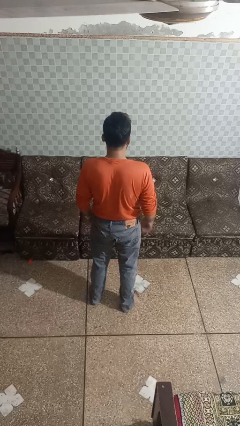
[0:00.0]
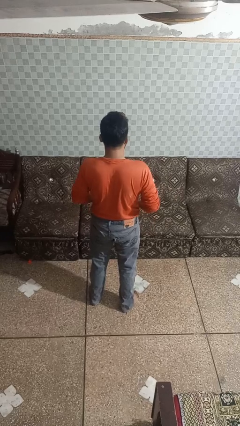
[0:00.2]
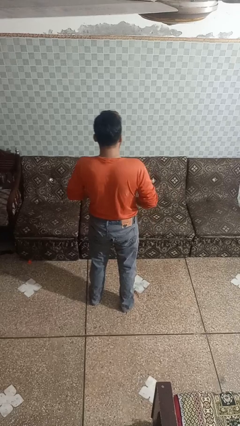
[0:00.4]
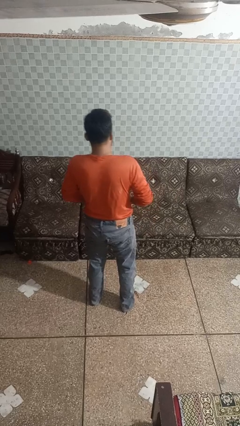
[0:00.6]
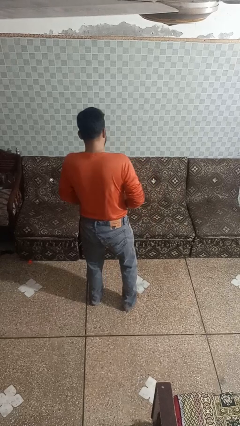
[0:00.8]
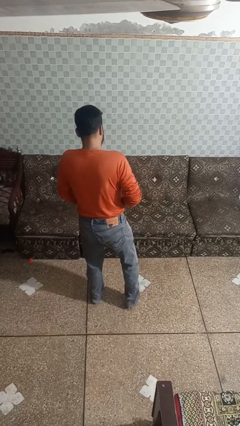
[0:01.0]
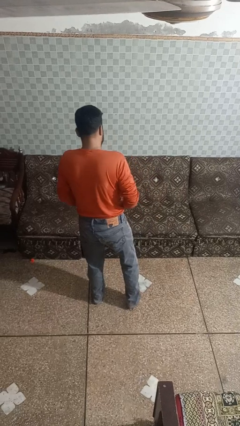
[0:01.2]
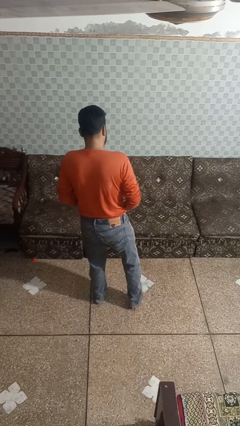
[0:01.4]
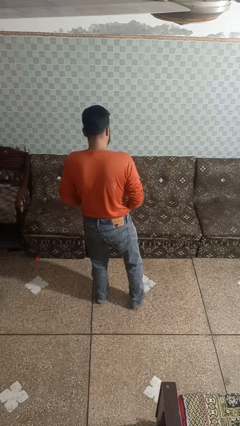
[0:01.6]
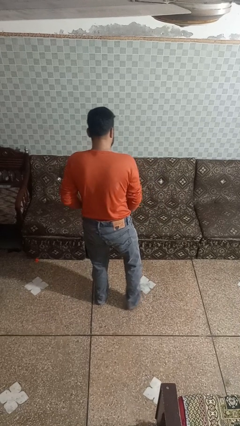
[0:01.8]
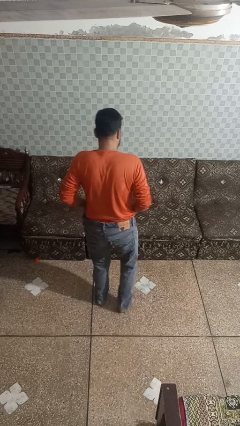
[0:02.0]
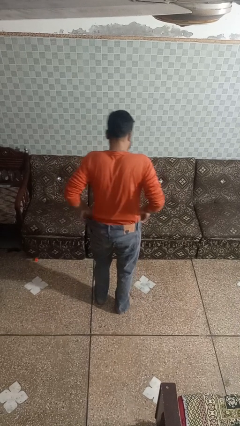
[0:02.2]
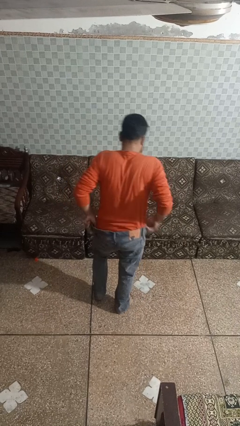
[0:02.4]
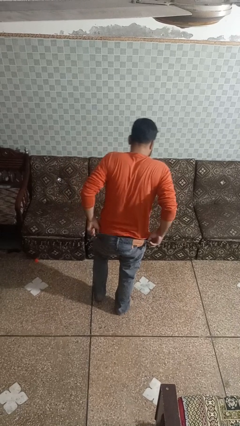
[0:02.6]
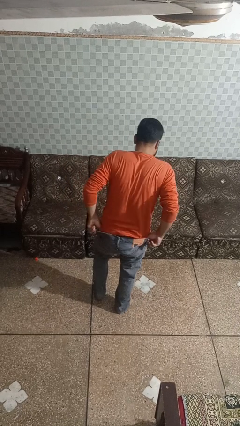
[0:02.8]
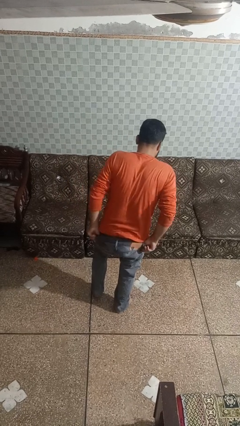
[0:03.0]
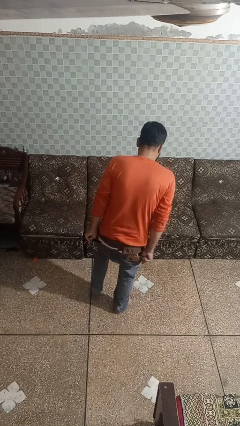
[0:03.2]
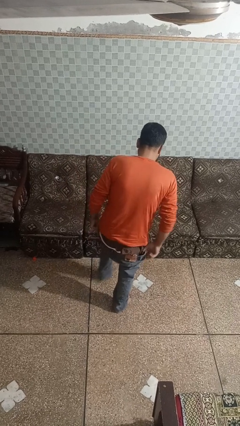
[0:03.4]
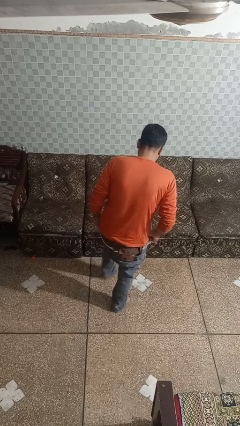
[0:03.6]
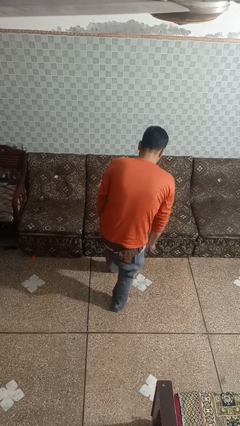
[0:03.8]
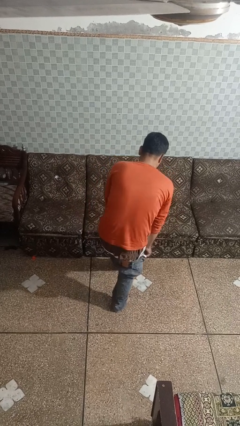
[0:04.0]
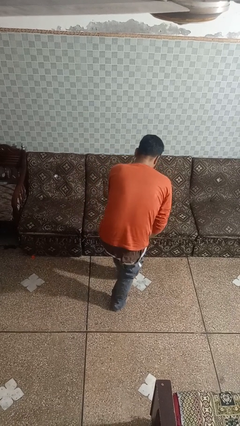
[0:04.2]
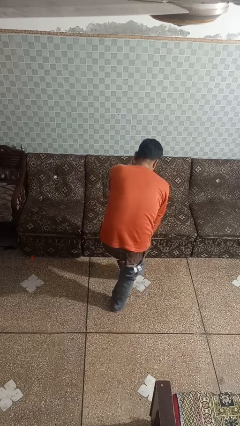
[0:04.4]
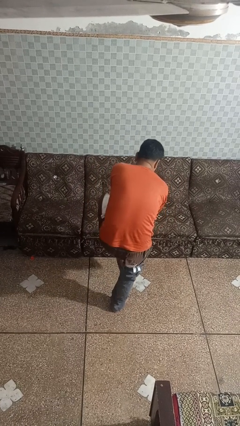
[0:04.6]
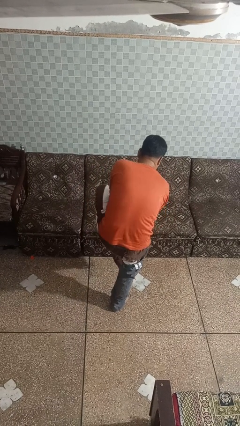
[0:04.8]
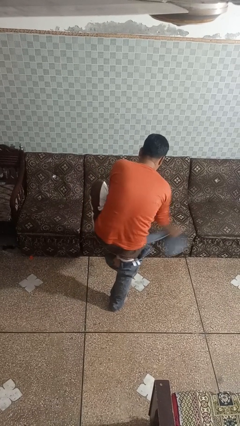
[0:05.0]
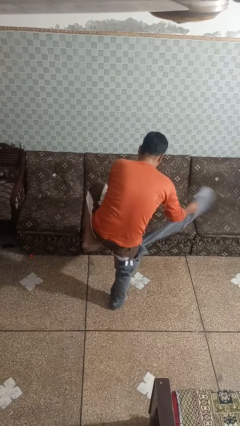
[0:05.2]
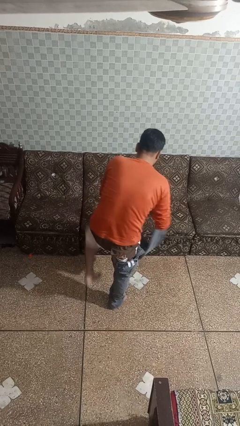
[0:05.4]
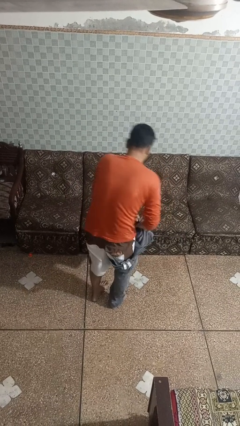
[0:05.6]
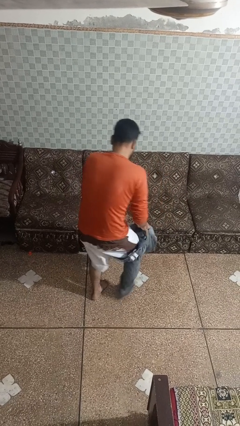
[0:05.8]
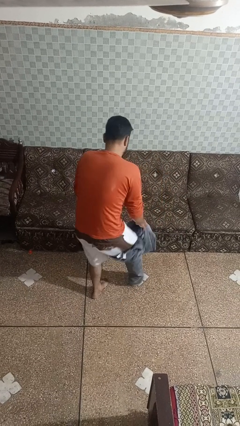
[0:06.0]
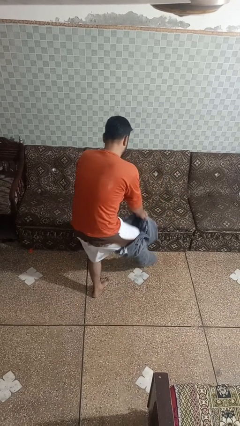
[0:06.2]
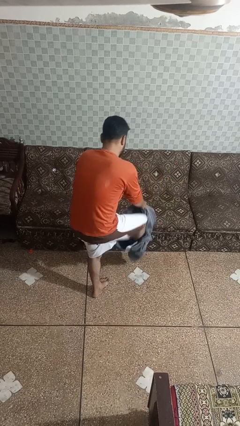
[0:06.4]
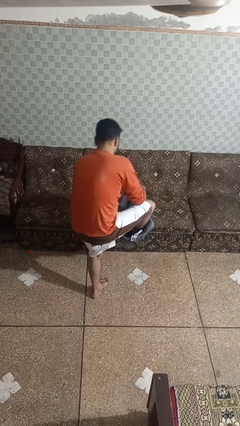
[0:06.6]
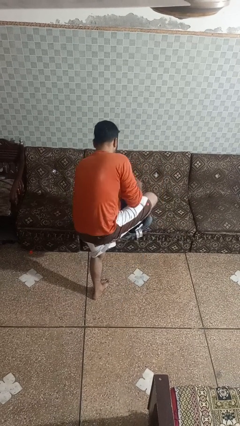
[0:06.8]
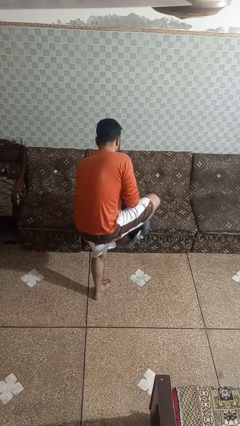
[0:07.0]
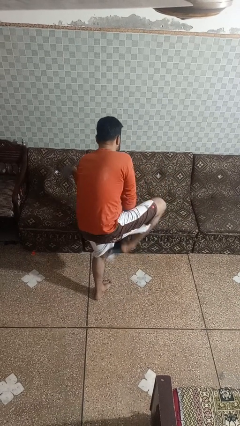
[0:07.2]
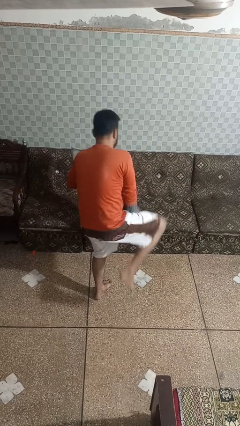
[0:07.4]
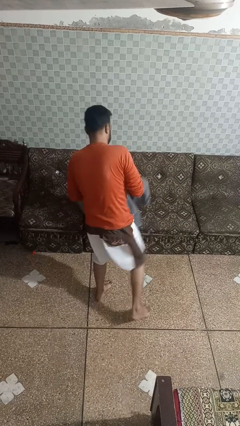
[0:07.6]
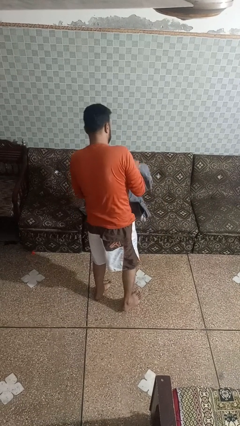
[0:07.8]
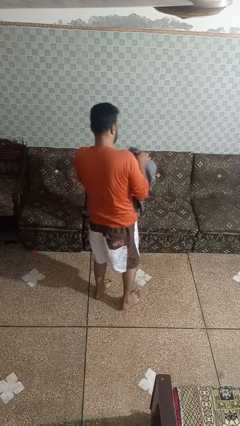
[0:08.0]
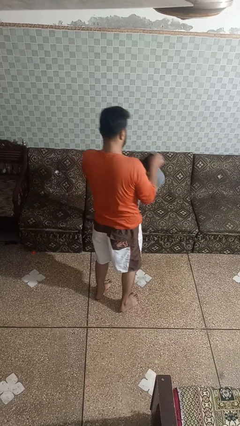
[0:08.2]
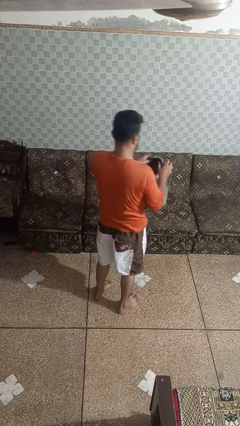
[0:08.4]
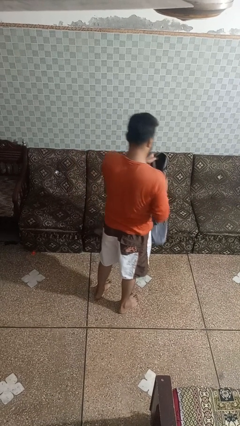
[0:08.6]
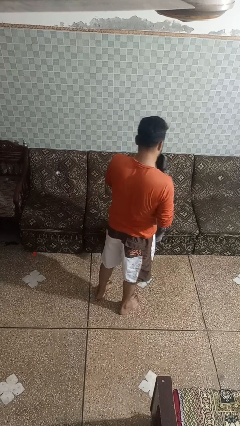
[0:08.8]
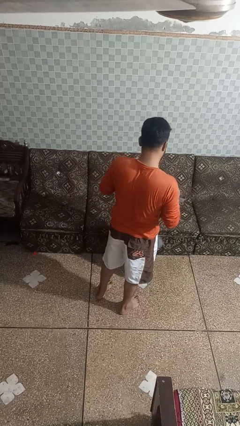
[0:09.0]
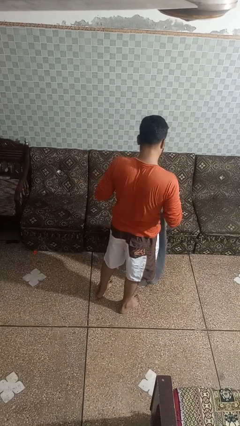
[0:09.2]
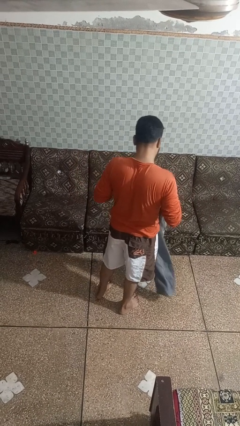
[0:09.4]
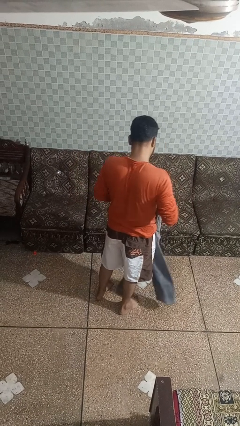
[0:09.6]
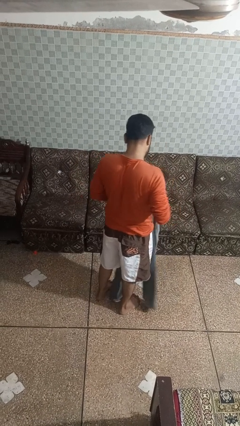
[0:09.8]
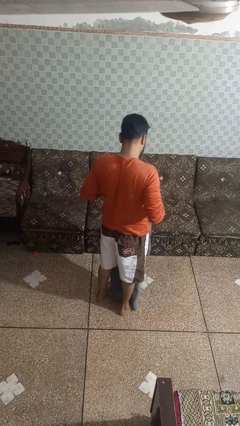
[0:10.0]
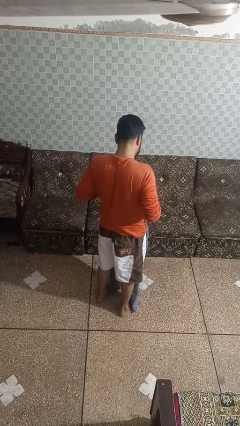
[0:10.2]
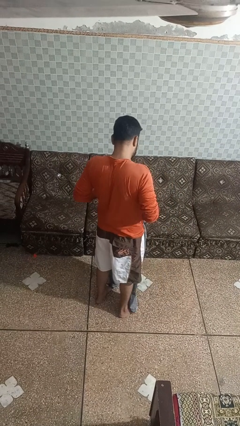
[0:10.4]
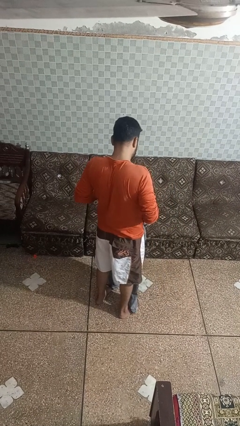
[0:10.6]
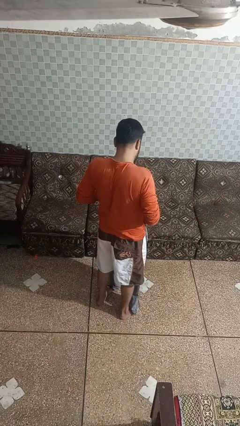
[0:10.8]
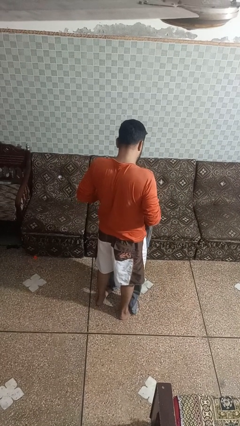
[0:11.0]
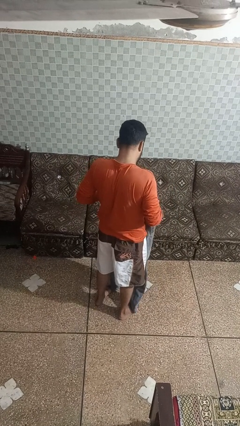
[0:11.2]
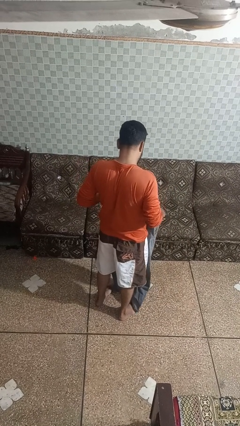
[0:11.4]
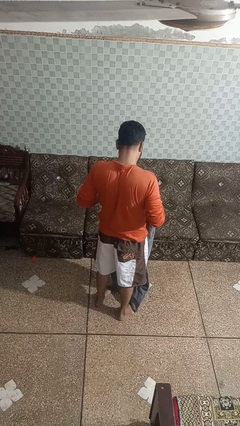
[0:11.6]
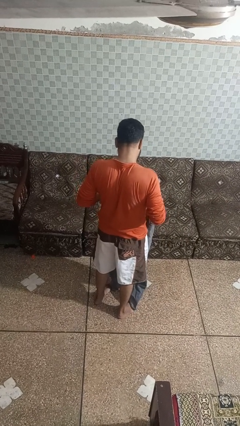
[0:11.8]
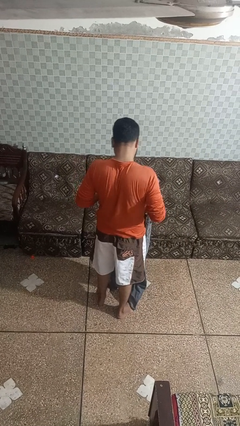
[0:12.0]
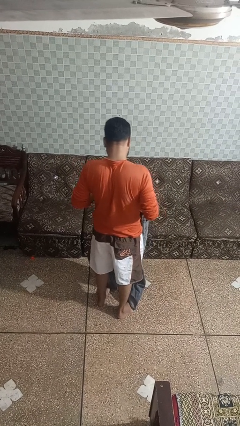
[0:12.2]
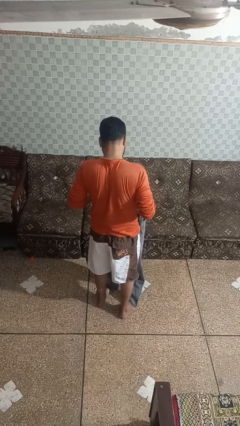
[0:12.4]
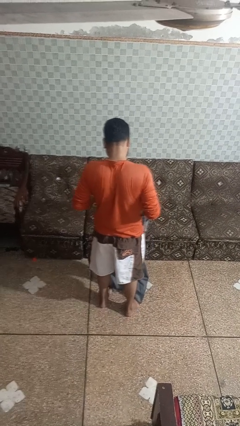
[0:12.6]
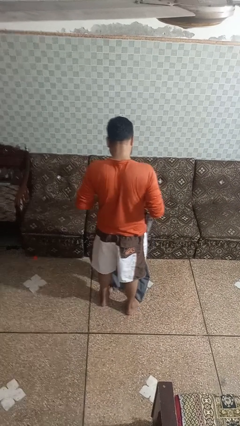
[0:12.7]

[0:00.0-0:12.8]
person takes off pants

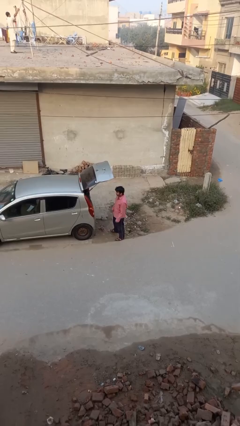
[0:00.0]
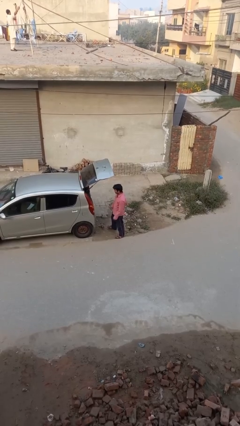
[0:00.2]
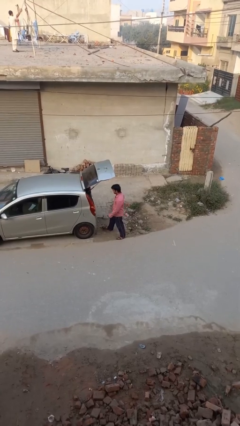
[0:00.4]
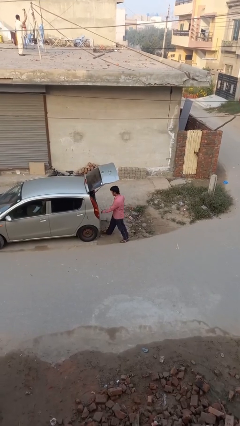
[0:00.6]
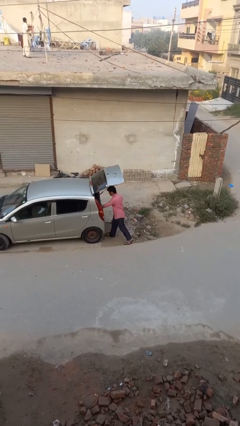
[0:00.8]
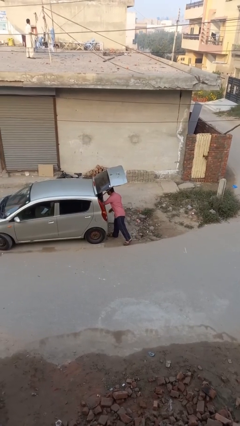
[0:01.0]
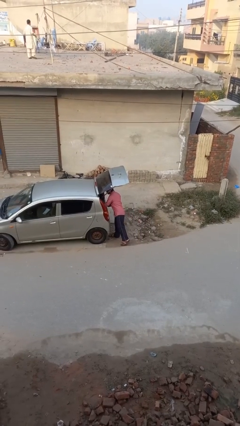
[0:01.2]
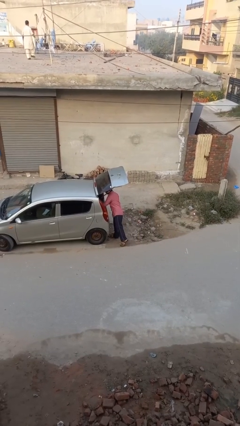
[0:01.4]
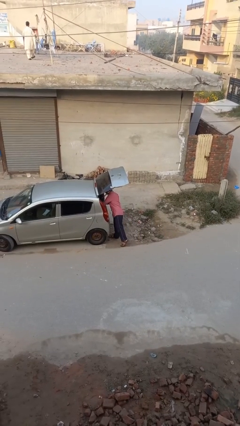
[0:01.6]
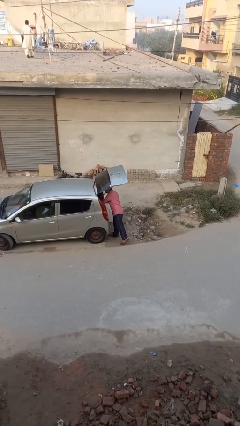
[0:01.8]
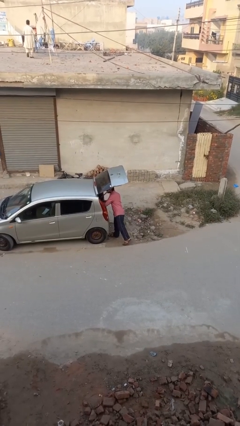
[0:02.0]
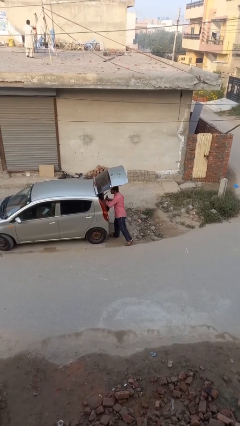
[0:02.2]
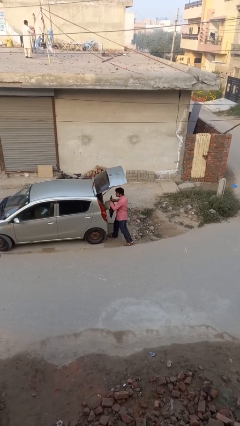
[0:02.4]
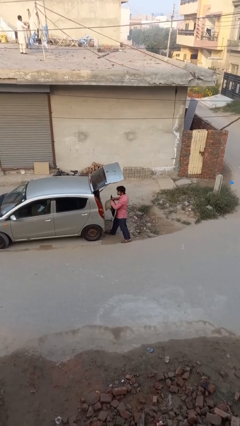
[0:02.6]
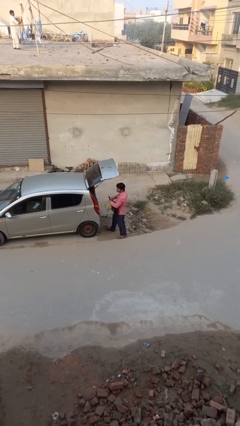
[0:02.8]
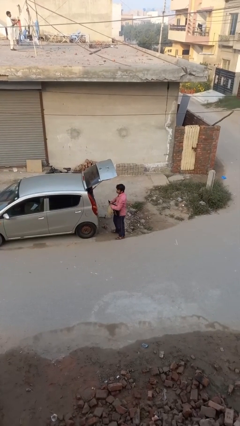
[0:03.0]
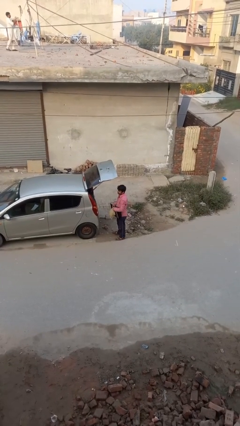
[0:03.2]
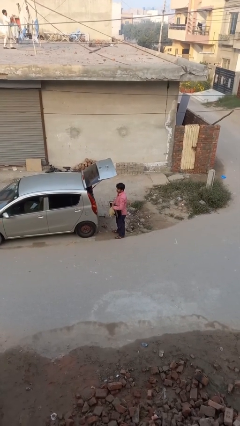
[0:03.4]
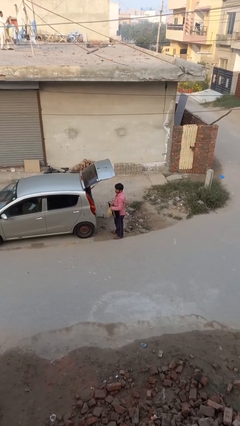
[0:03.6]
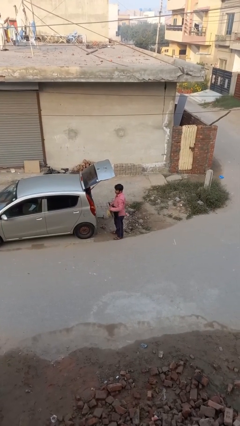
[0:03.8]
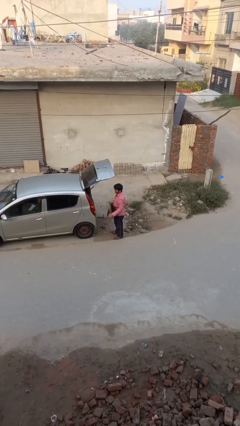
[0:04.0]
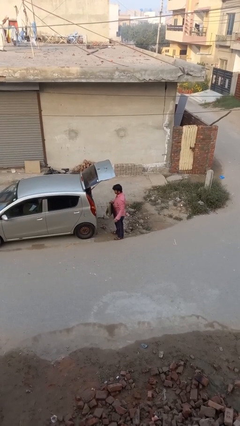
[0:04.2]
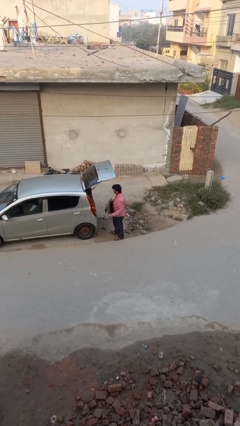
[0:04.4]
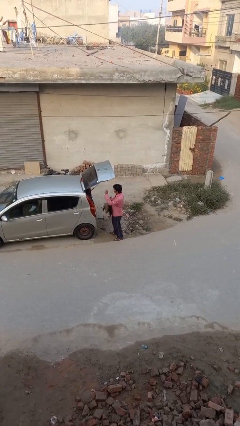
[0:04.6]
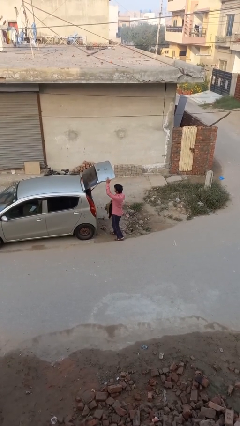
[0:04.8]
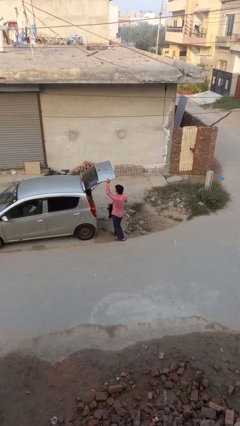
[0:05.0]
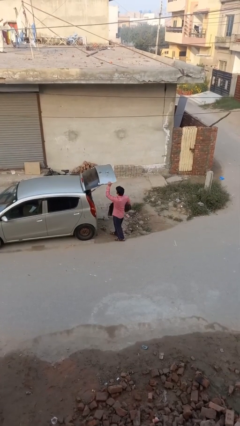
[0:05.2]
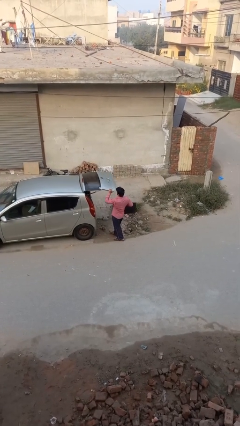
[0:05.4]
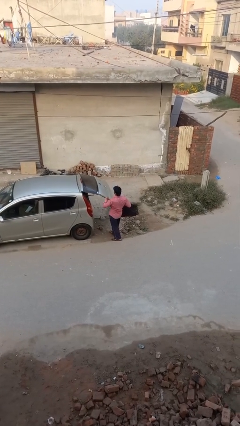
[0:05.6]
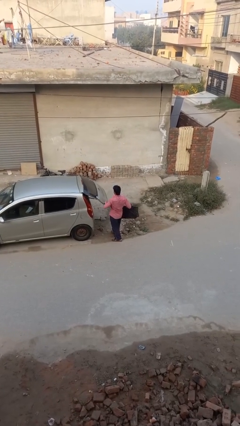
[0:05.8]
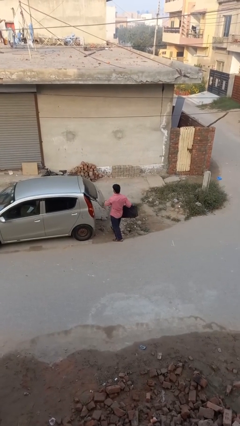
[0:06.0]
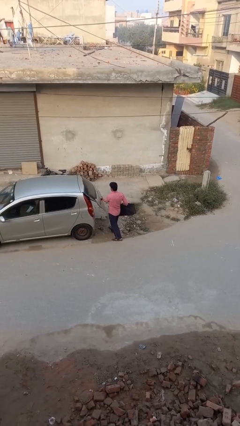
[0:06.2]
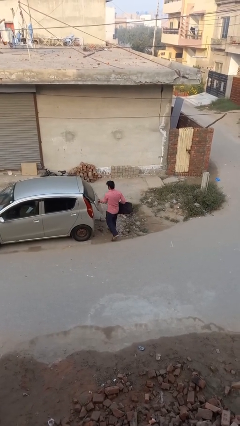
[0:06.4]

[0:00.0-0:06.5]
person unloads car
